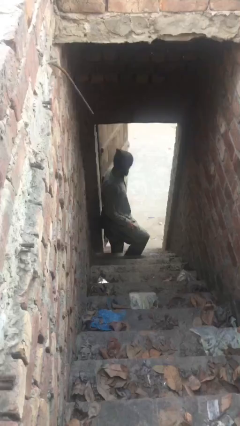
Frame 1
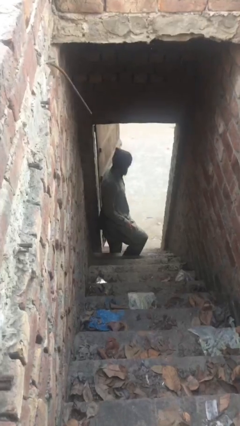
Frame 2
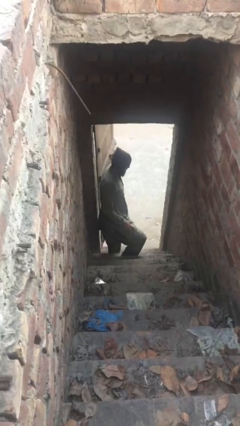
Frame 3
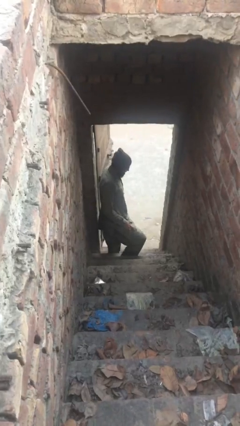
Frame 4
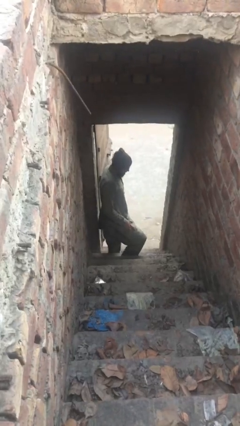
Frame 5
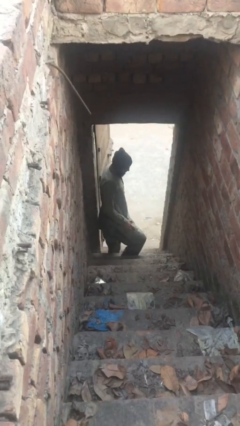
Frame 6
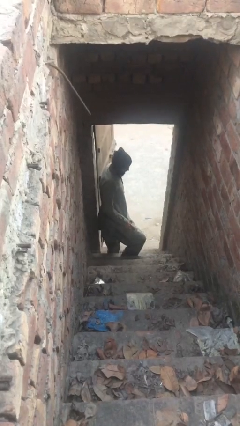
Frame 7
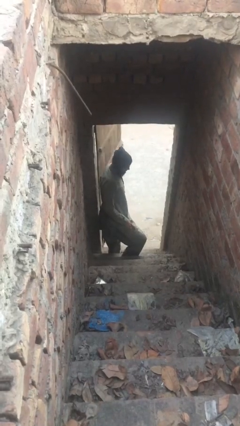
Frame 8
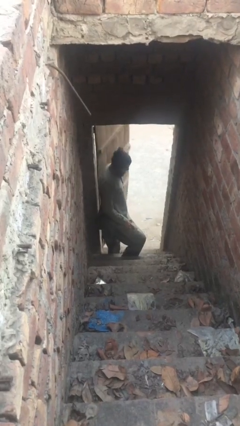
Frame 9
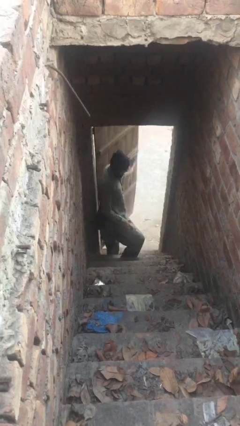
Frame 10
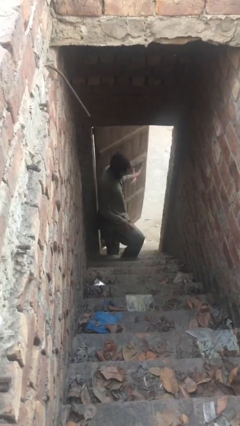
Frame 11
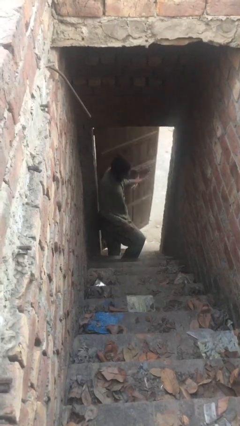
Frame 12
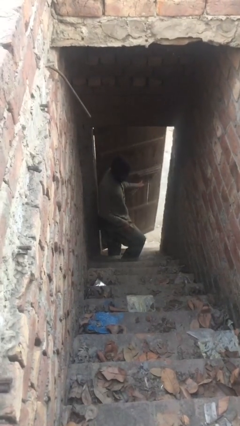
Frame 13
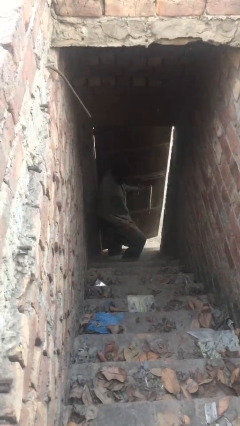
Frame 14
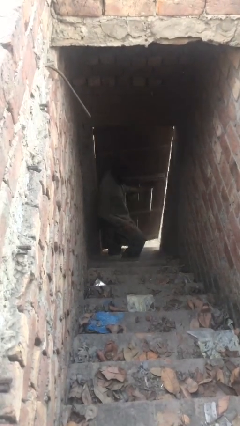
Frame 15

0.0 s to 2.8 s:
person closes facility door

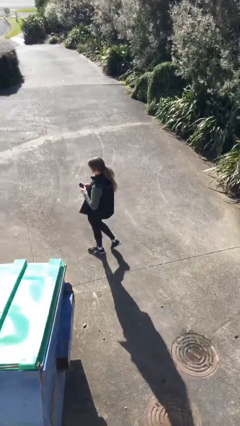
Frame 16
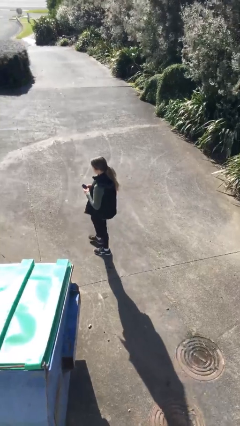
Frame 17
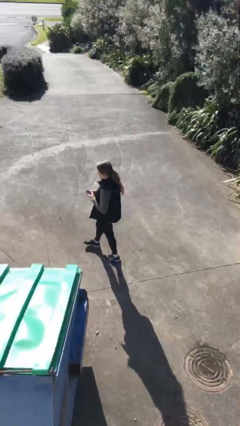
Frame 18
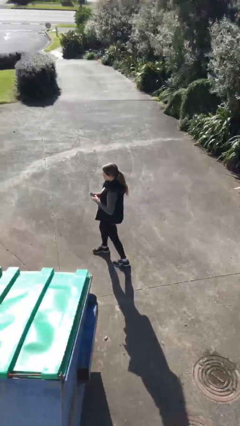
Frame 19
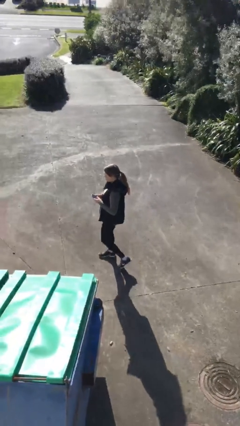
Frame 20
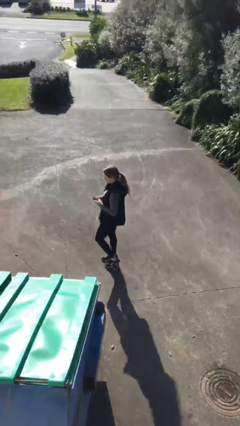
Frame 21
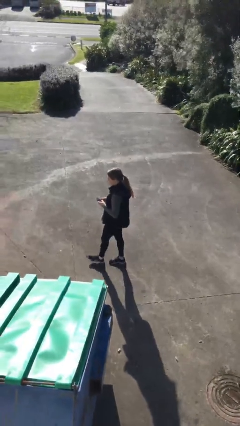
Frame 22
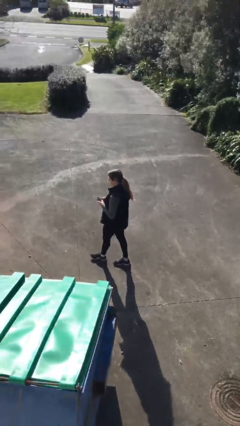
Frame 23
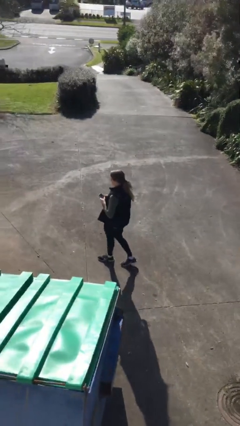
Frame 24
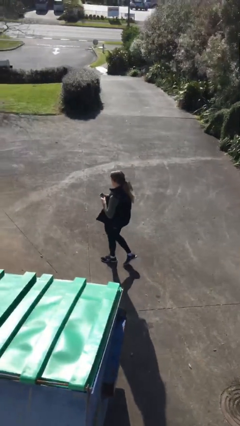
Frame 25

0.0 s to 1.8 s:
person texts on phone

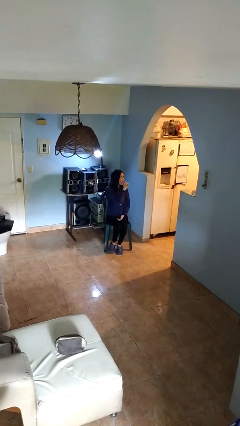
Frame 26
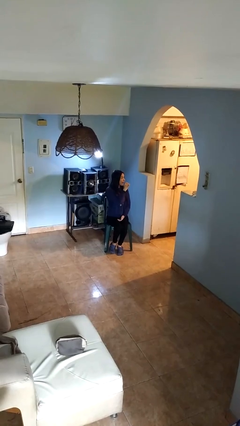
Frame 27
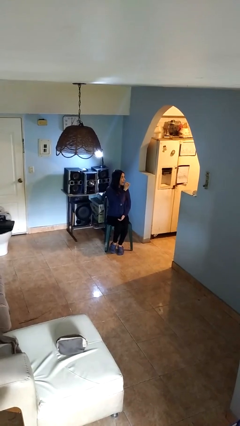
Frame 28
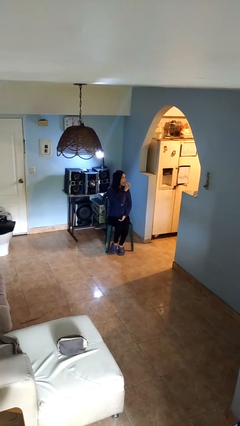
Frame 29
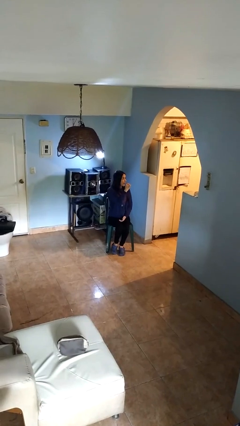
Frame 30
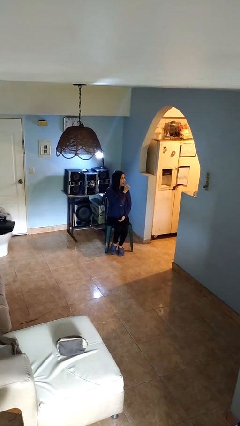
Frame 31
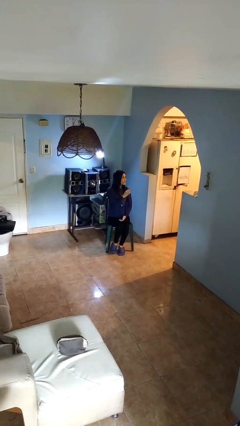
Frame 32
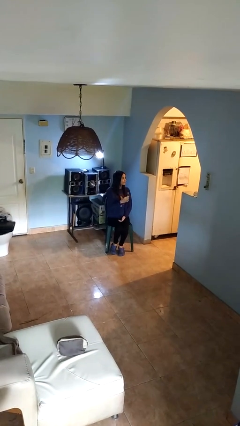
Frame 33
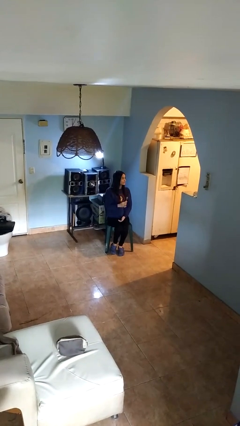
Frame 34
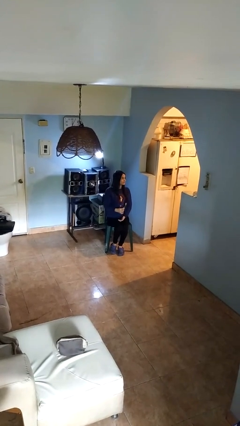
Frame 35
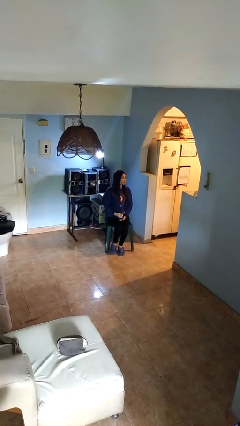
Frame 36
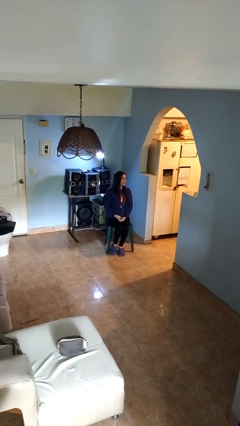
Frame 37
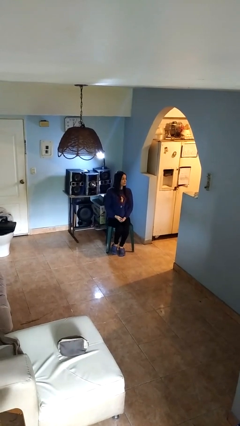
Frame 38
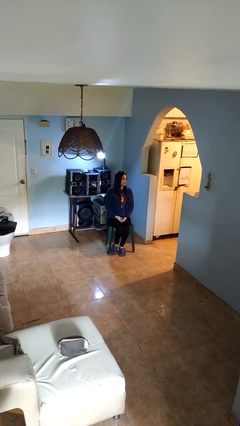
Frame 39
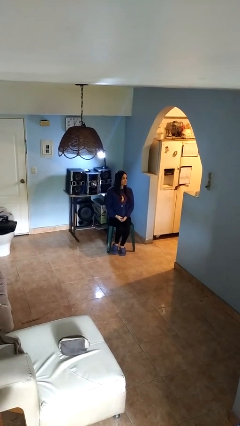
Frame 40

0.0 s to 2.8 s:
person brushes teeth

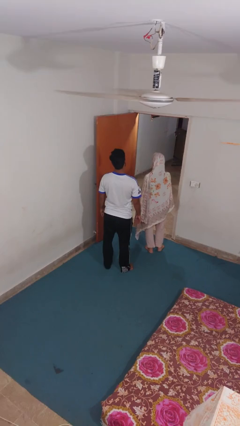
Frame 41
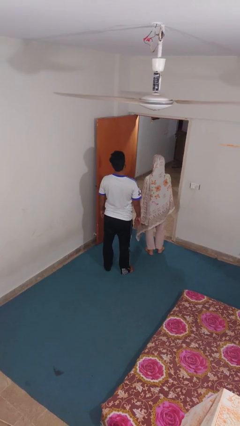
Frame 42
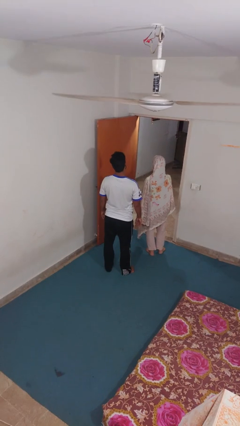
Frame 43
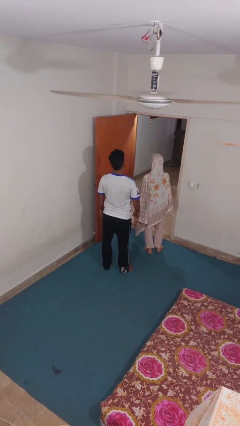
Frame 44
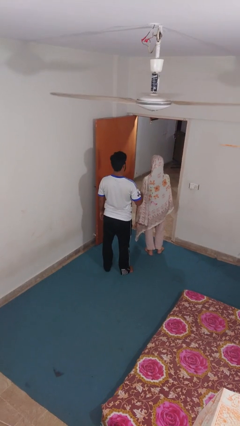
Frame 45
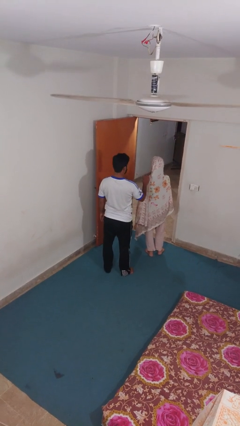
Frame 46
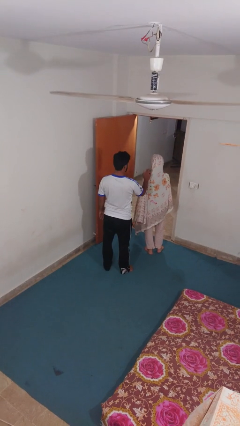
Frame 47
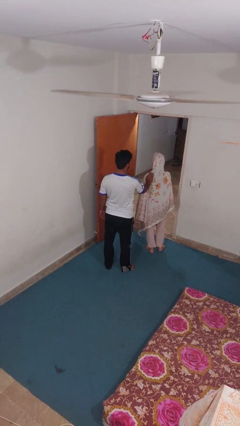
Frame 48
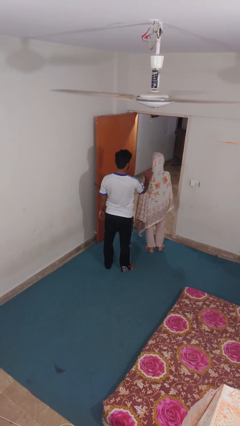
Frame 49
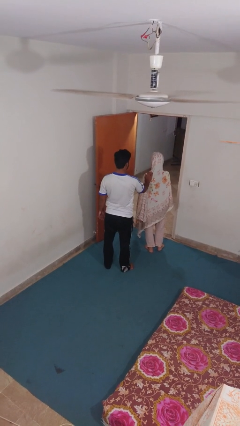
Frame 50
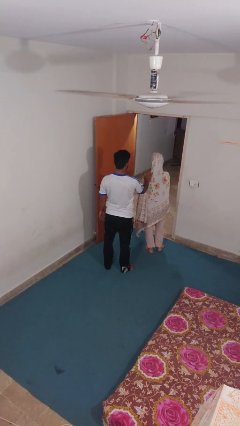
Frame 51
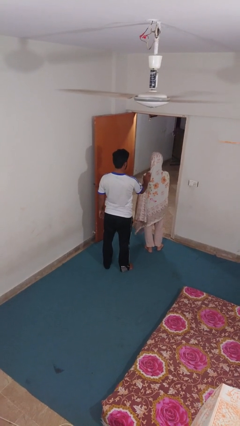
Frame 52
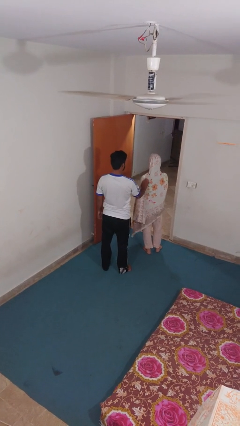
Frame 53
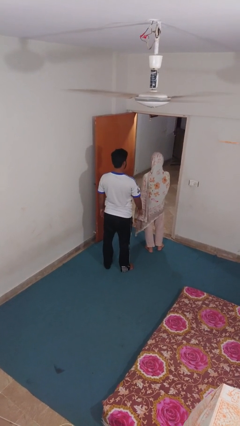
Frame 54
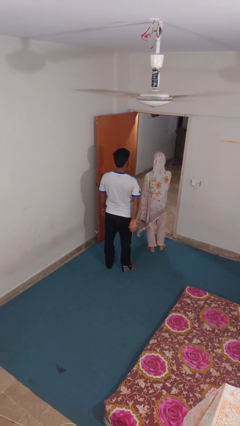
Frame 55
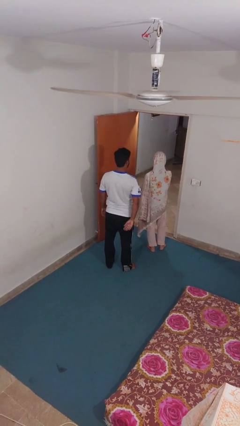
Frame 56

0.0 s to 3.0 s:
person touches back of person

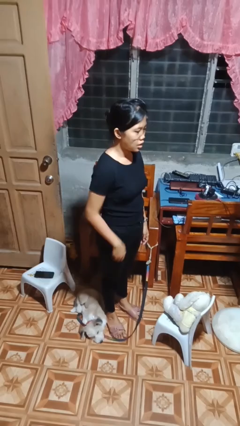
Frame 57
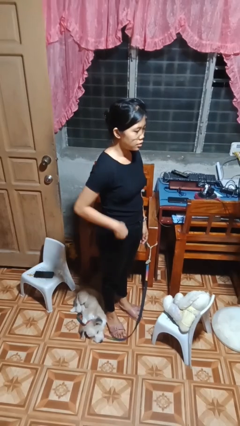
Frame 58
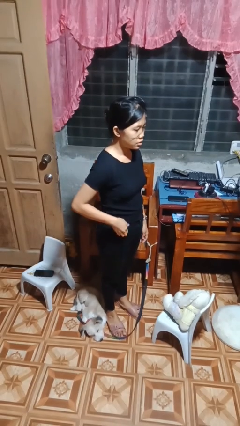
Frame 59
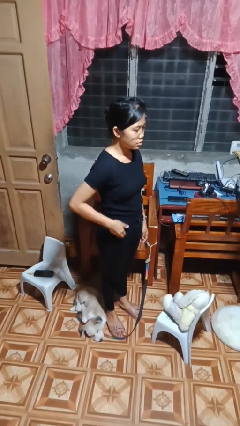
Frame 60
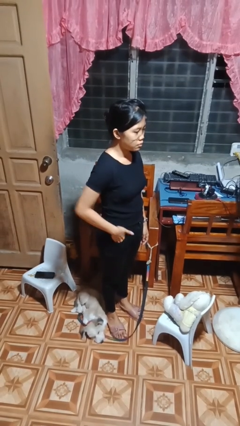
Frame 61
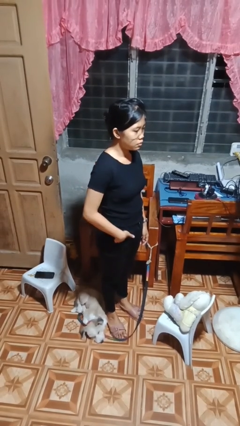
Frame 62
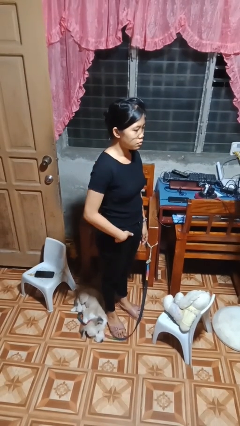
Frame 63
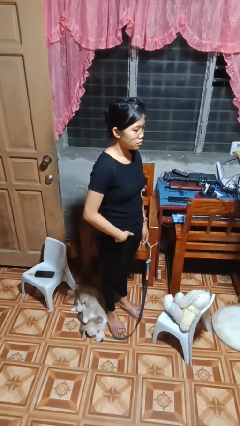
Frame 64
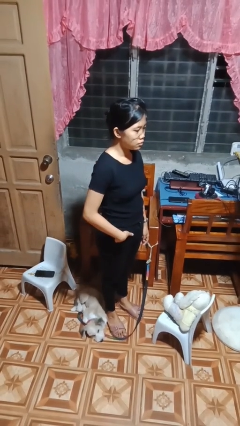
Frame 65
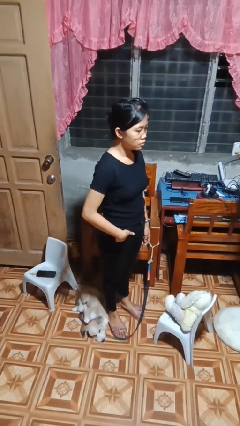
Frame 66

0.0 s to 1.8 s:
person puts hands in back pockets

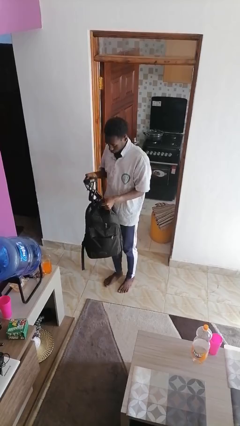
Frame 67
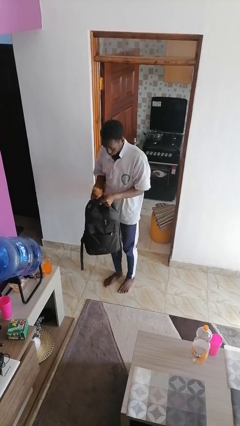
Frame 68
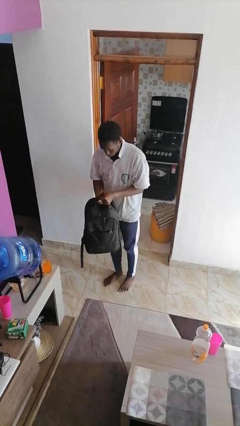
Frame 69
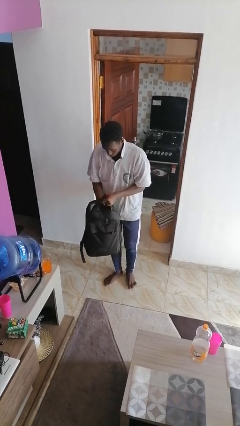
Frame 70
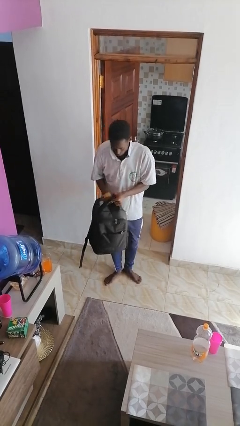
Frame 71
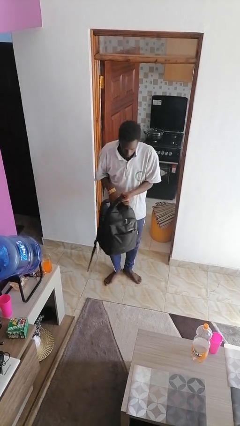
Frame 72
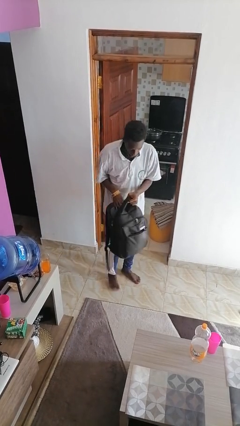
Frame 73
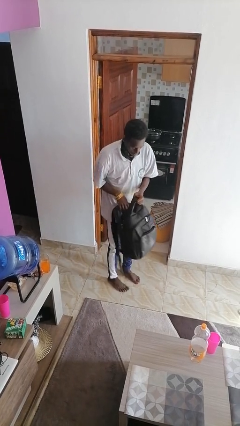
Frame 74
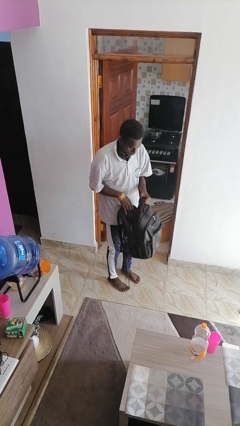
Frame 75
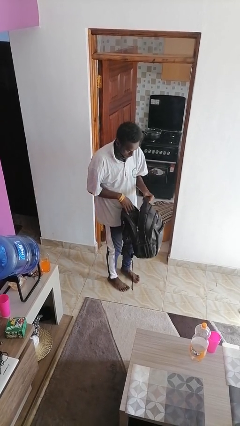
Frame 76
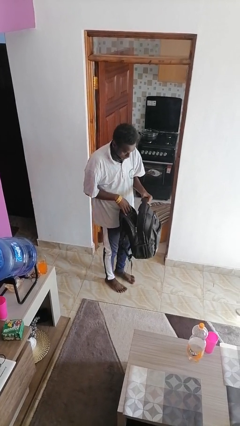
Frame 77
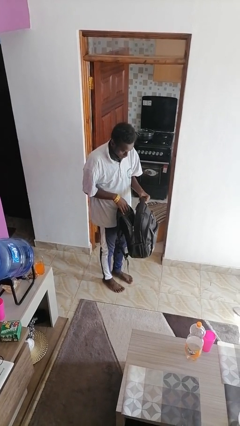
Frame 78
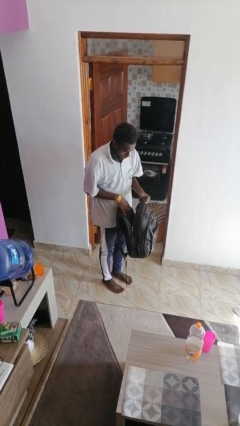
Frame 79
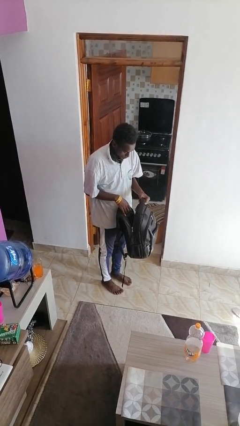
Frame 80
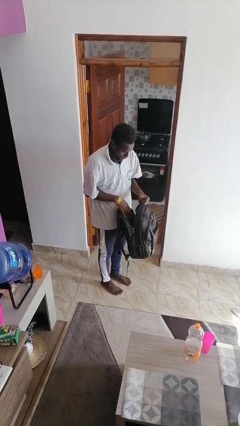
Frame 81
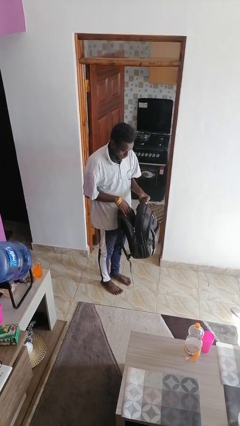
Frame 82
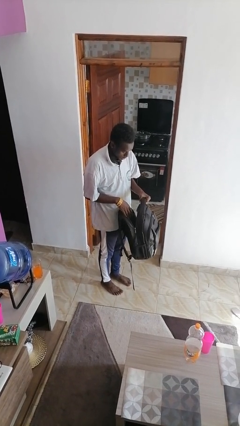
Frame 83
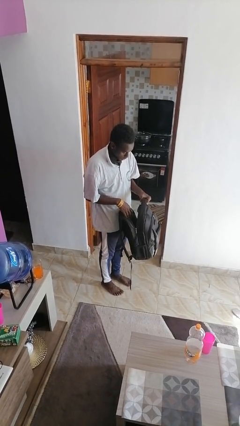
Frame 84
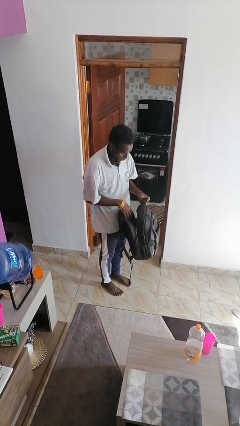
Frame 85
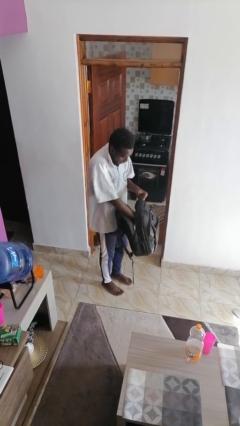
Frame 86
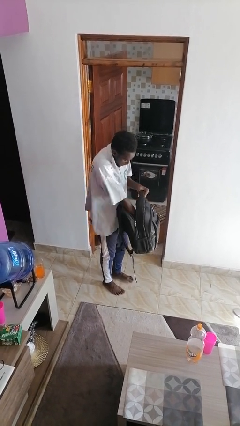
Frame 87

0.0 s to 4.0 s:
person puts object into backpack

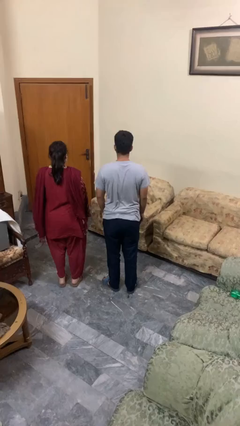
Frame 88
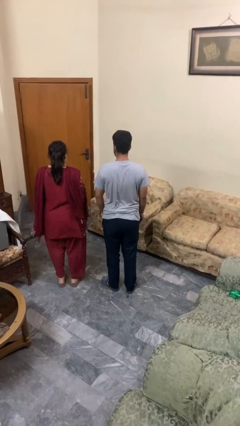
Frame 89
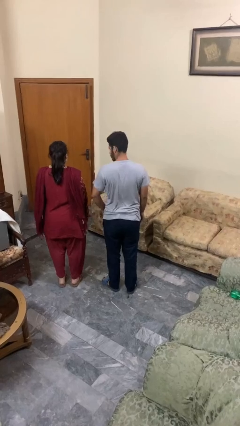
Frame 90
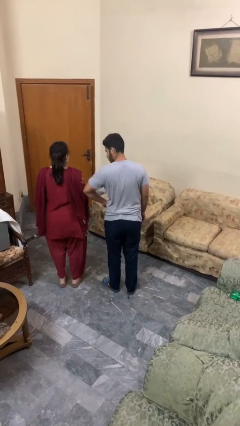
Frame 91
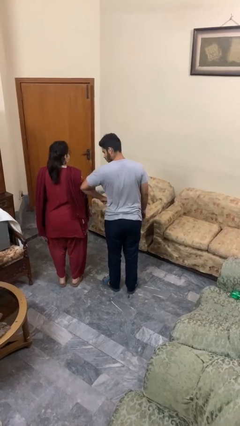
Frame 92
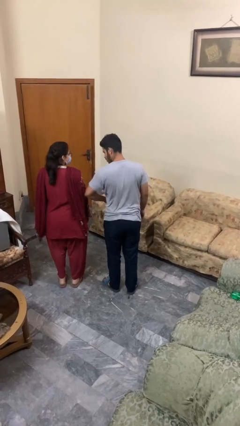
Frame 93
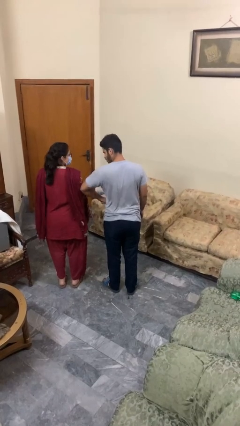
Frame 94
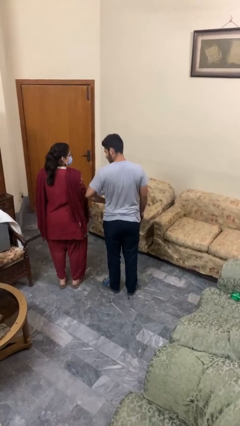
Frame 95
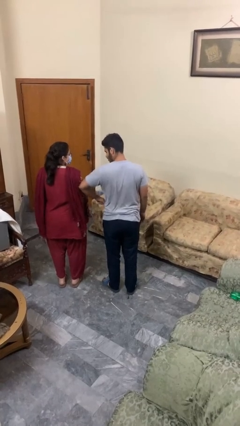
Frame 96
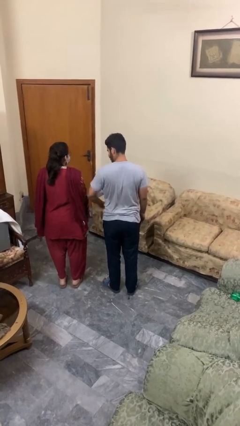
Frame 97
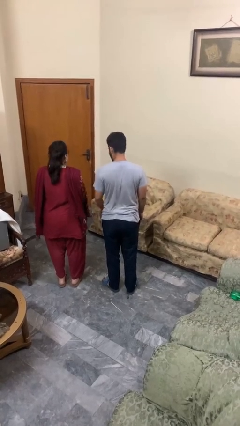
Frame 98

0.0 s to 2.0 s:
person nudges person with elbow
